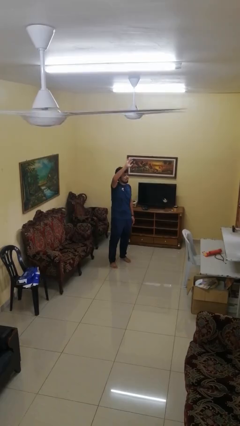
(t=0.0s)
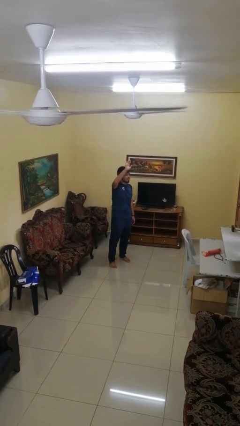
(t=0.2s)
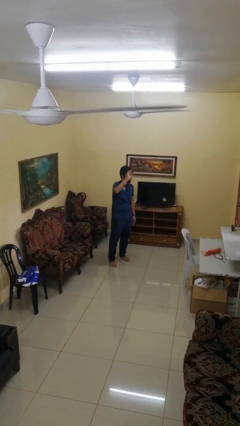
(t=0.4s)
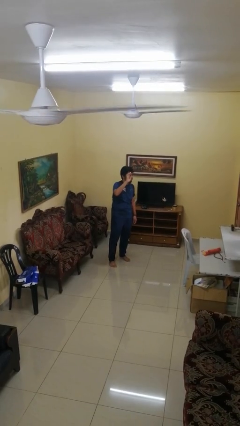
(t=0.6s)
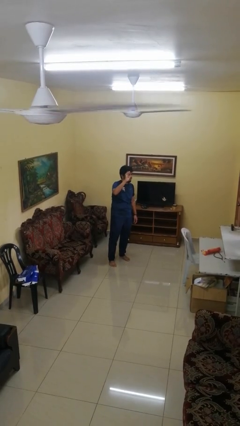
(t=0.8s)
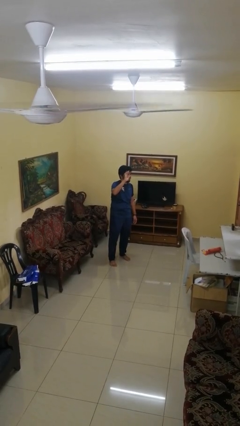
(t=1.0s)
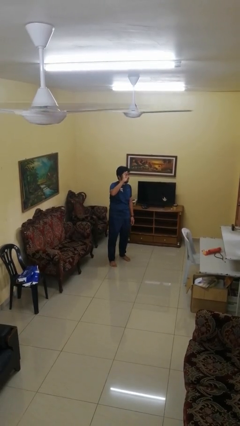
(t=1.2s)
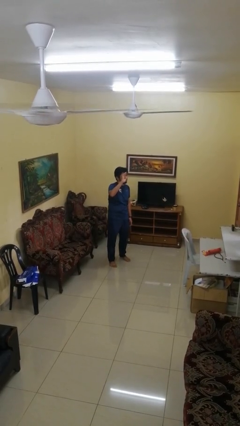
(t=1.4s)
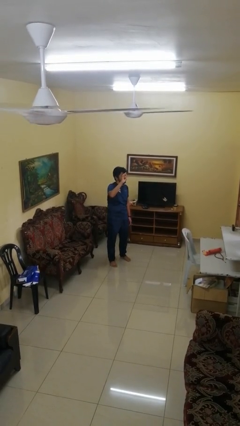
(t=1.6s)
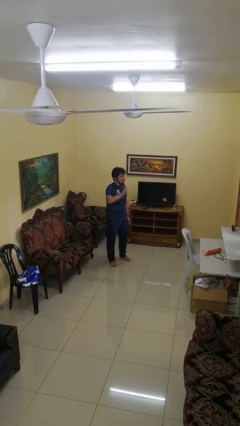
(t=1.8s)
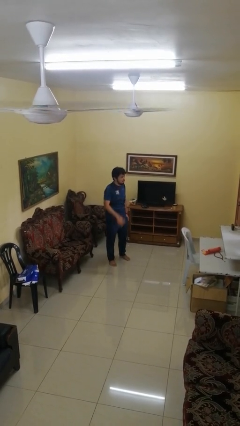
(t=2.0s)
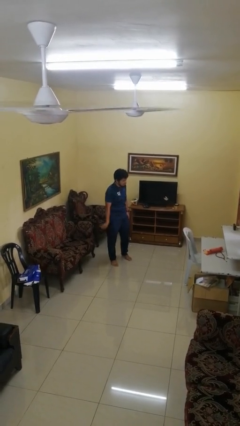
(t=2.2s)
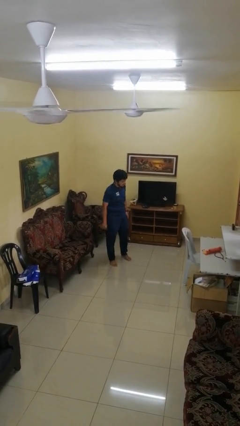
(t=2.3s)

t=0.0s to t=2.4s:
person gestures lower hand

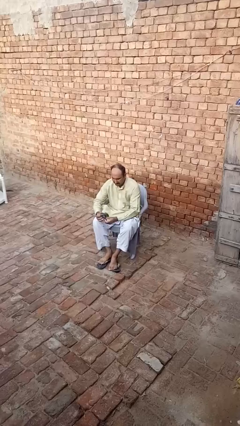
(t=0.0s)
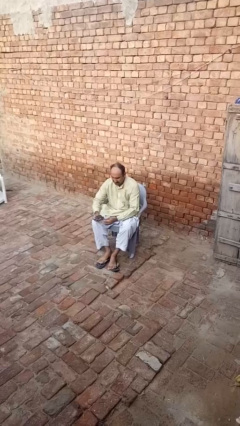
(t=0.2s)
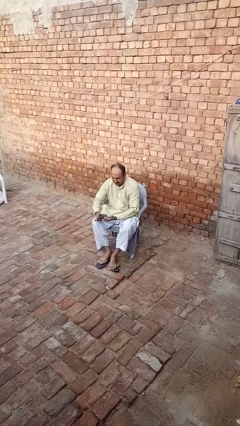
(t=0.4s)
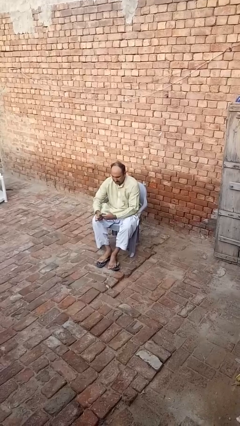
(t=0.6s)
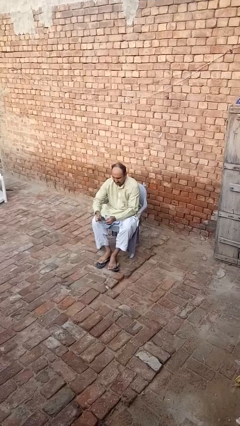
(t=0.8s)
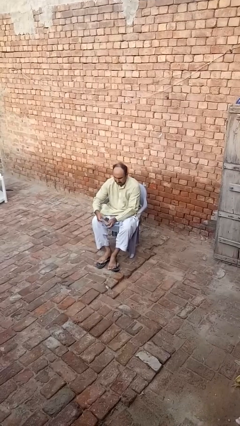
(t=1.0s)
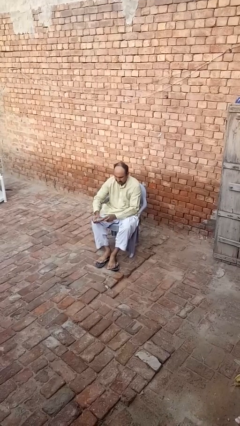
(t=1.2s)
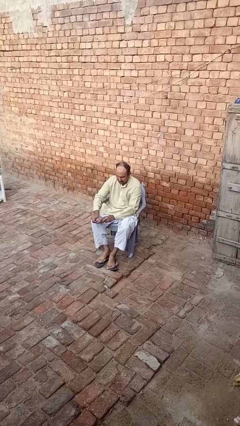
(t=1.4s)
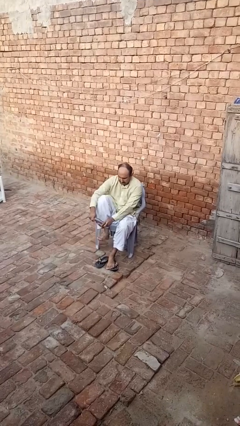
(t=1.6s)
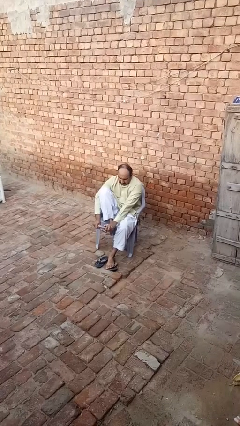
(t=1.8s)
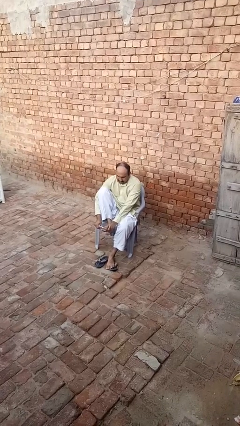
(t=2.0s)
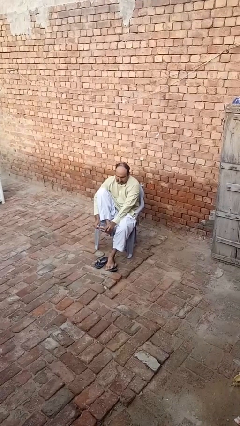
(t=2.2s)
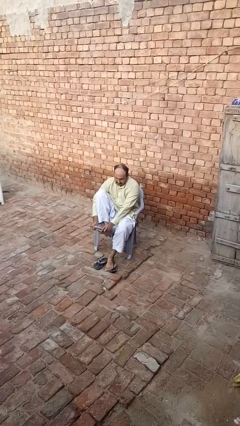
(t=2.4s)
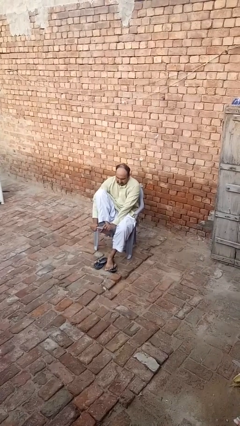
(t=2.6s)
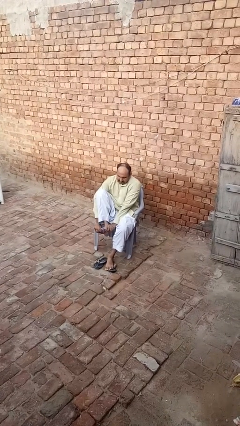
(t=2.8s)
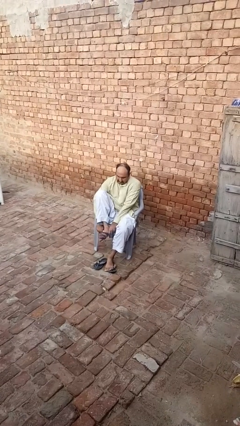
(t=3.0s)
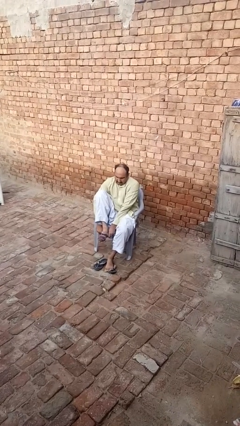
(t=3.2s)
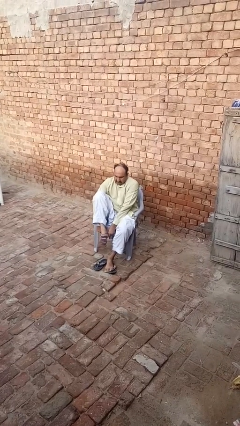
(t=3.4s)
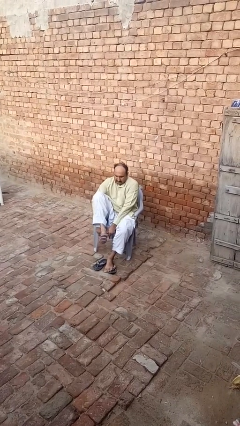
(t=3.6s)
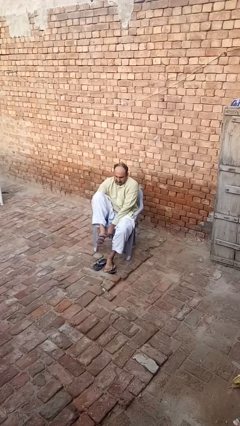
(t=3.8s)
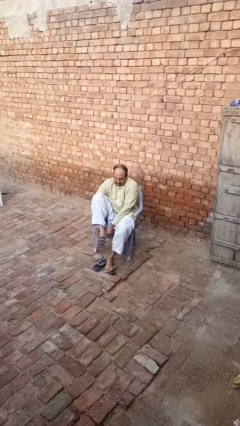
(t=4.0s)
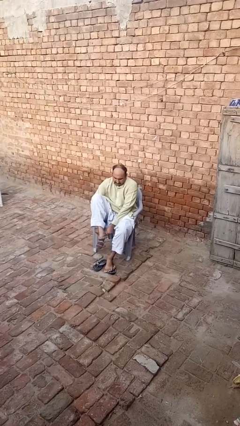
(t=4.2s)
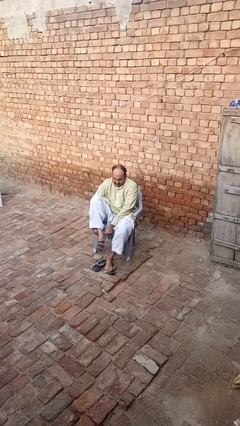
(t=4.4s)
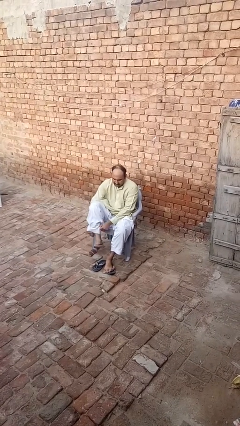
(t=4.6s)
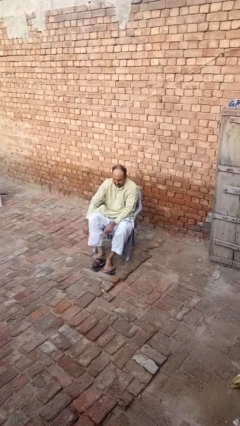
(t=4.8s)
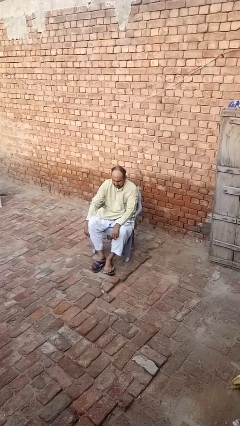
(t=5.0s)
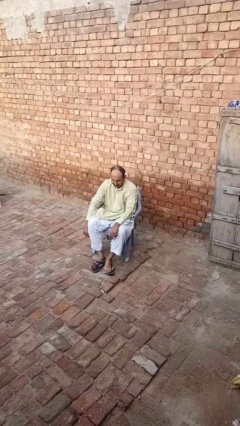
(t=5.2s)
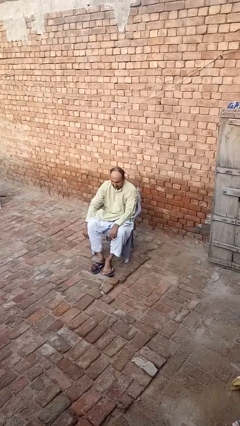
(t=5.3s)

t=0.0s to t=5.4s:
person puts on socks

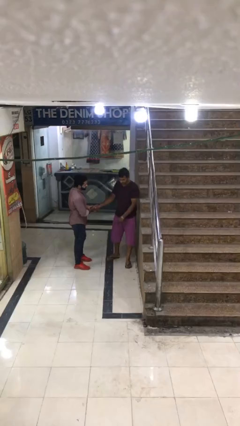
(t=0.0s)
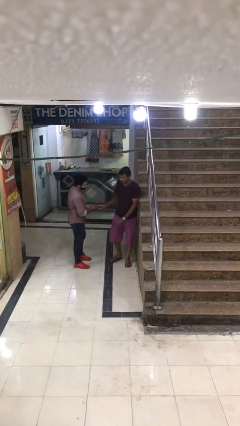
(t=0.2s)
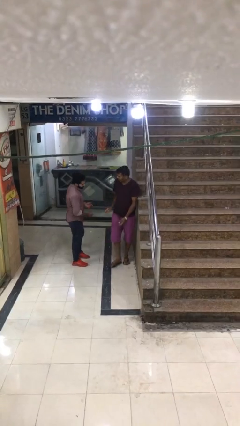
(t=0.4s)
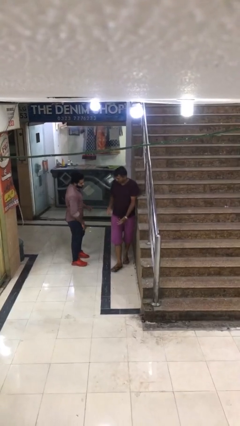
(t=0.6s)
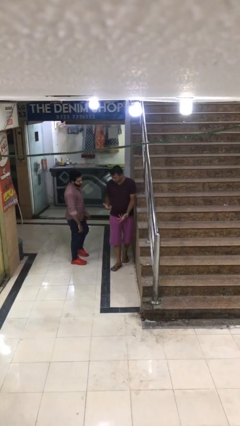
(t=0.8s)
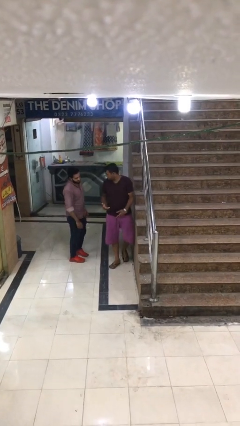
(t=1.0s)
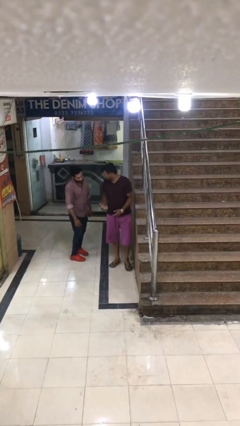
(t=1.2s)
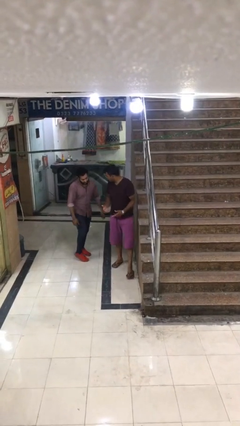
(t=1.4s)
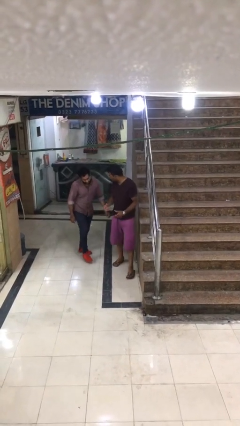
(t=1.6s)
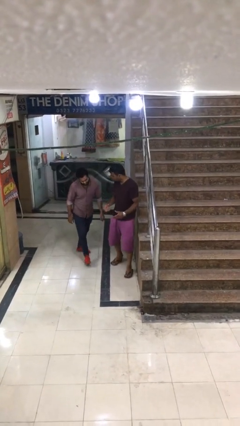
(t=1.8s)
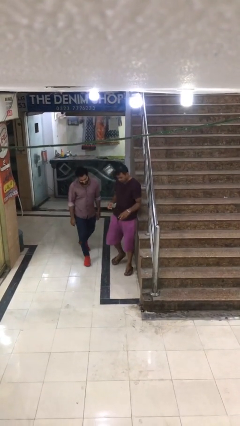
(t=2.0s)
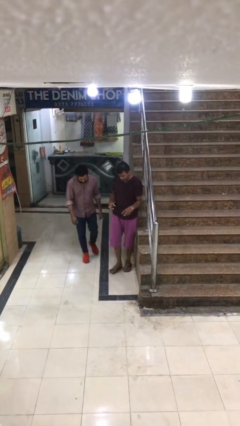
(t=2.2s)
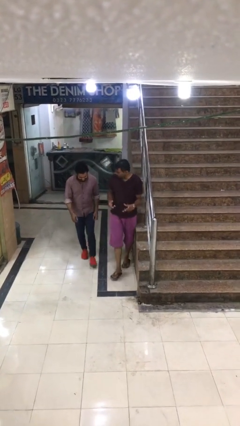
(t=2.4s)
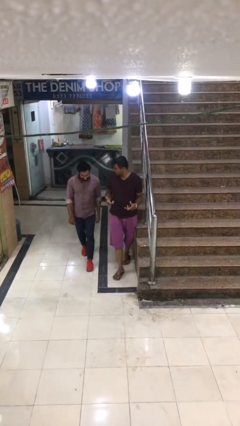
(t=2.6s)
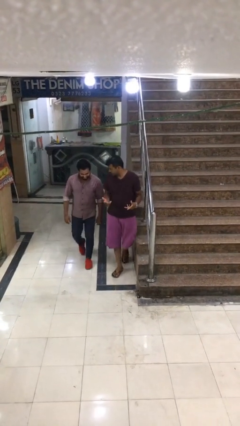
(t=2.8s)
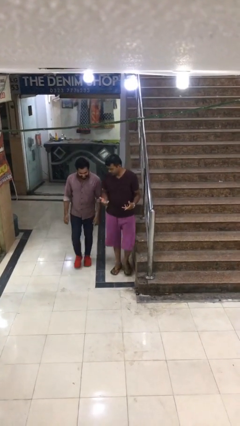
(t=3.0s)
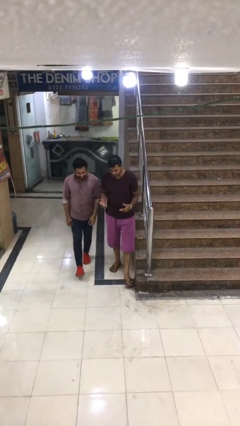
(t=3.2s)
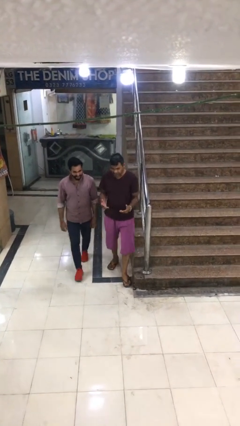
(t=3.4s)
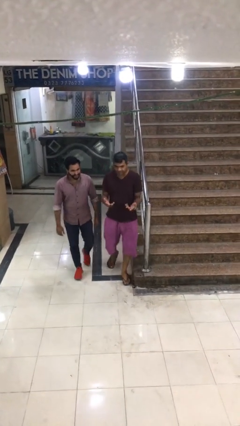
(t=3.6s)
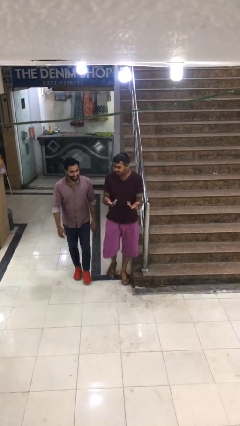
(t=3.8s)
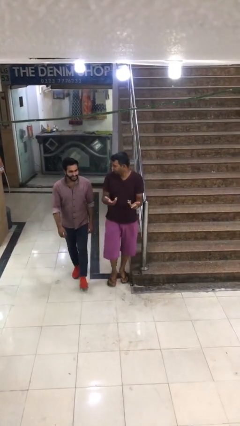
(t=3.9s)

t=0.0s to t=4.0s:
person talks to person

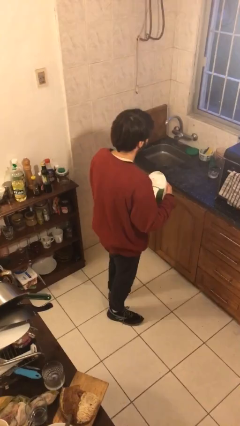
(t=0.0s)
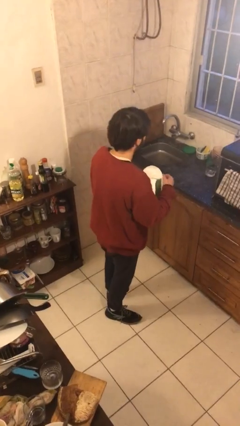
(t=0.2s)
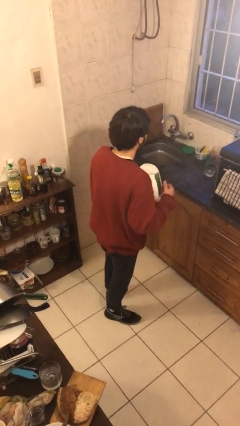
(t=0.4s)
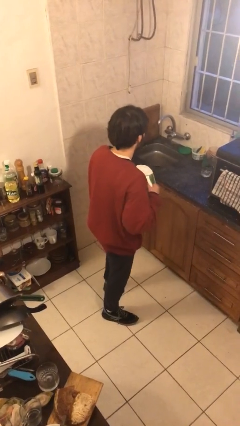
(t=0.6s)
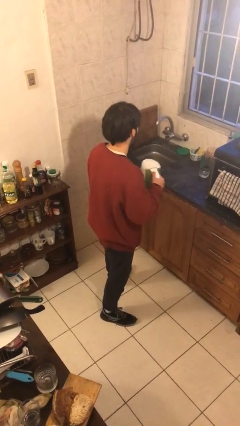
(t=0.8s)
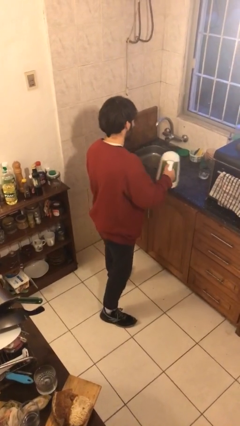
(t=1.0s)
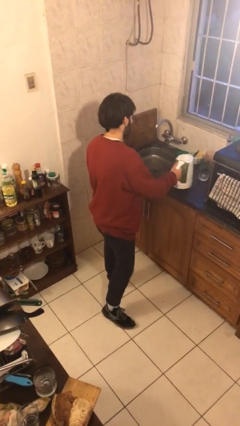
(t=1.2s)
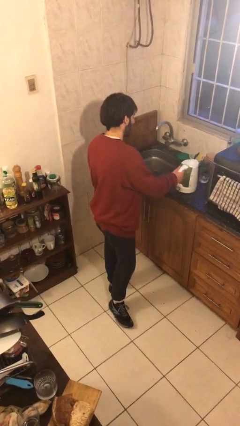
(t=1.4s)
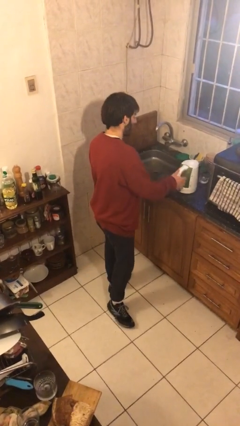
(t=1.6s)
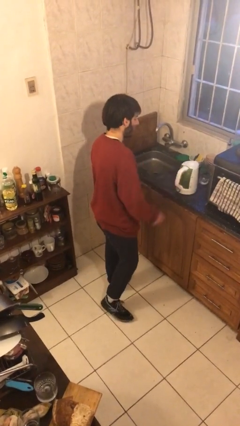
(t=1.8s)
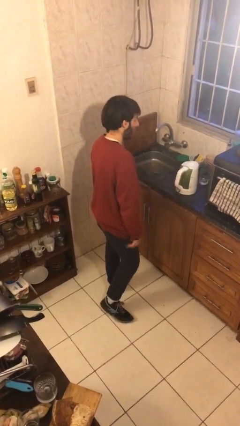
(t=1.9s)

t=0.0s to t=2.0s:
person puts down object on countertop

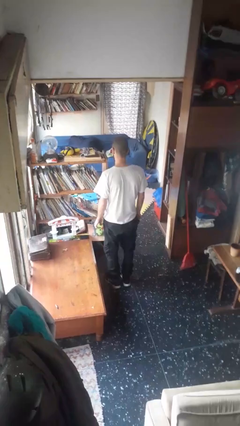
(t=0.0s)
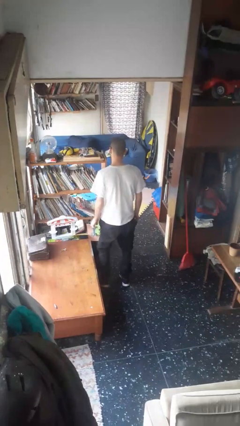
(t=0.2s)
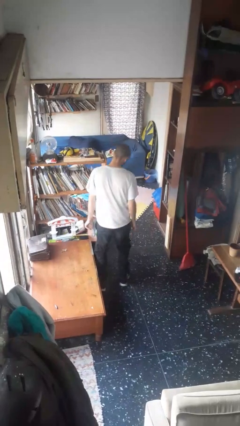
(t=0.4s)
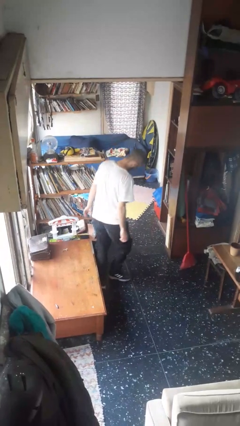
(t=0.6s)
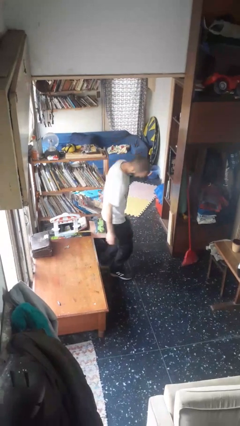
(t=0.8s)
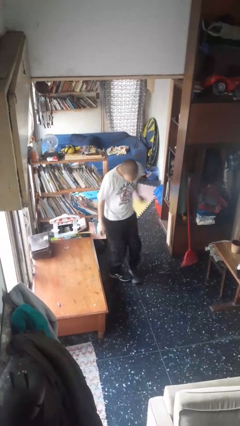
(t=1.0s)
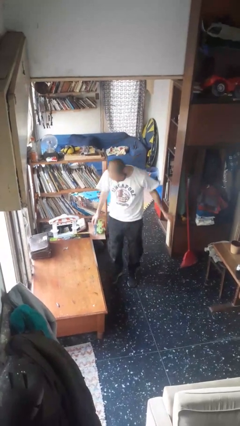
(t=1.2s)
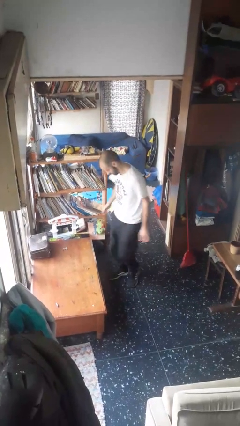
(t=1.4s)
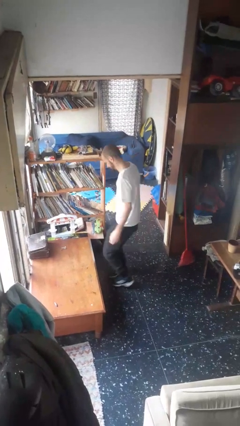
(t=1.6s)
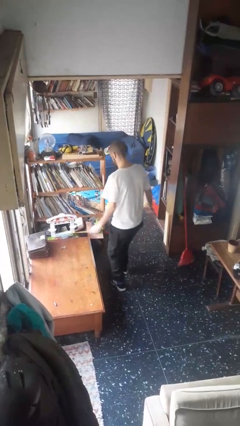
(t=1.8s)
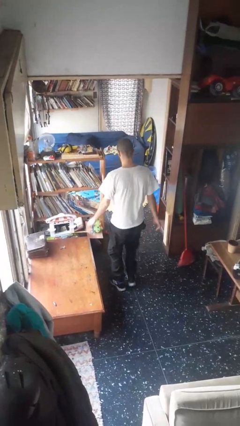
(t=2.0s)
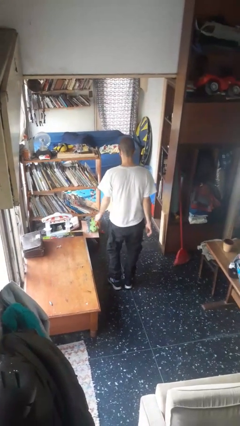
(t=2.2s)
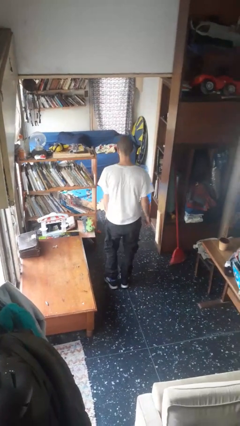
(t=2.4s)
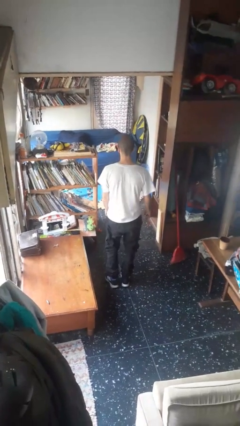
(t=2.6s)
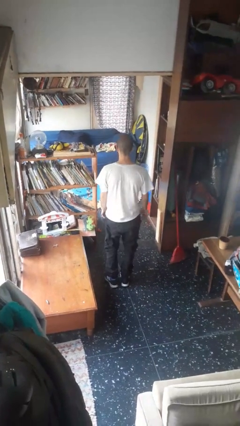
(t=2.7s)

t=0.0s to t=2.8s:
person twirls

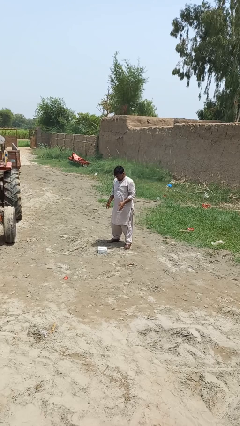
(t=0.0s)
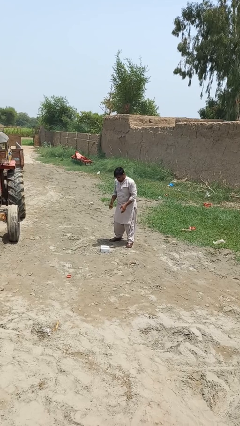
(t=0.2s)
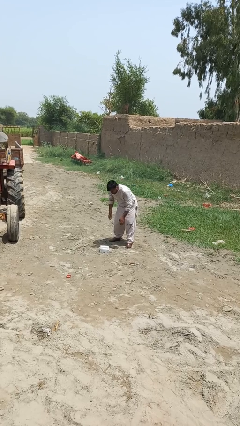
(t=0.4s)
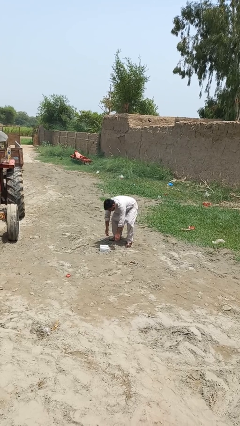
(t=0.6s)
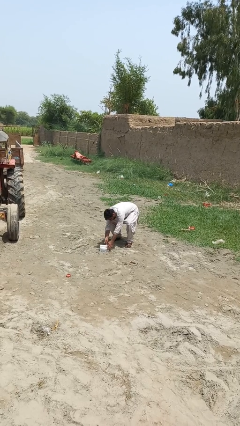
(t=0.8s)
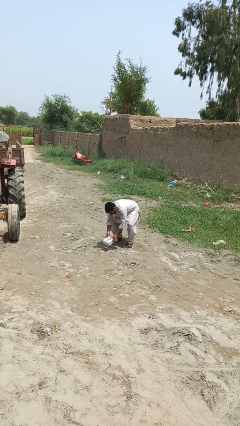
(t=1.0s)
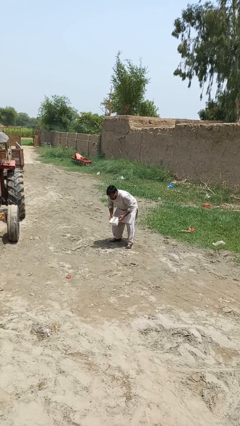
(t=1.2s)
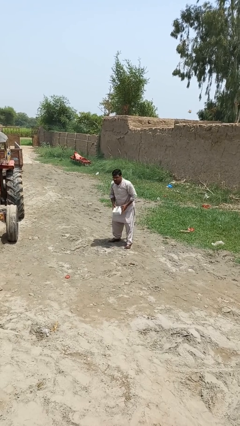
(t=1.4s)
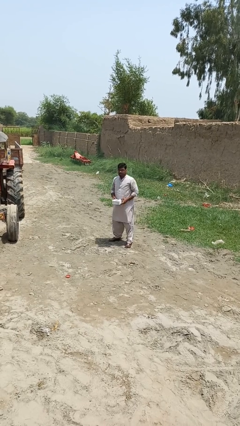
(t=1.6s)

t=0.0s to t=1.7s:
person picks up object from floor
